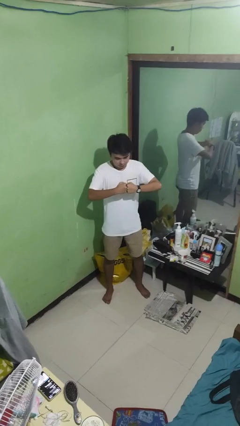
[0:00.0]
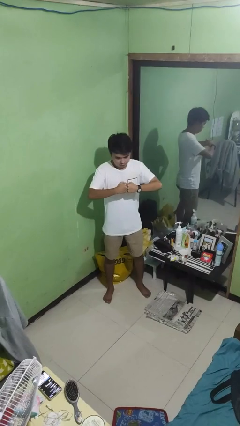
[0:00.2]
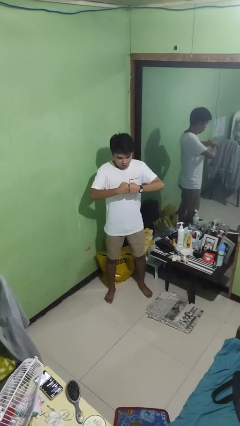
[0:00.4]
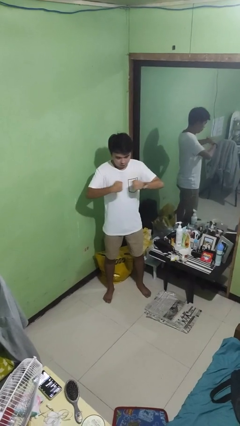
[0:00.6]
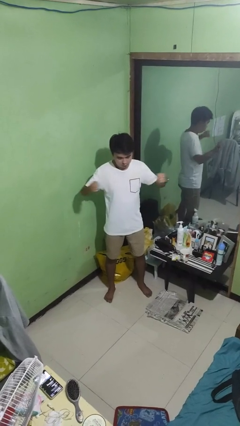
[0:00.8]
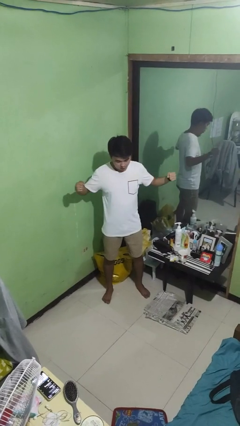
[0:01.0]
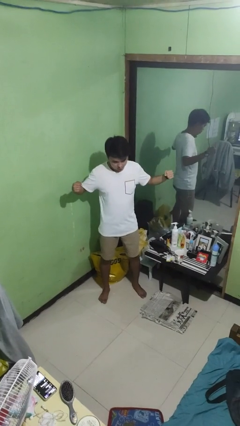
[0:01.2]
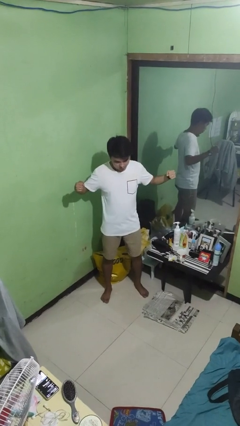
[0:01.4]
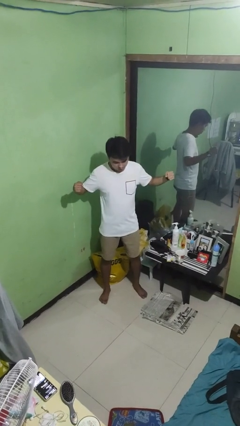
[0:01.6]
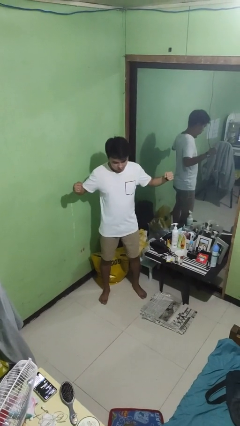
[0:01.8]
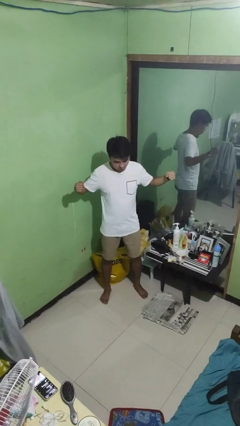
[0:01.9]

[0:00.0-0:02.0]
person gestures zoom in

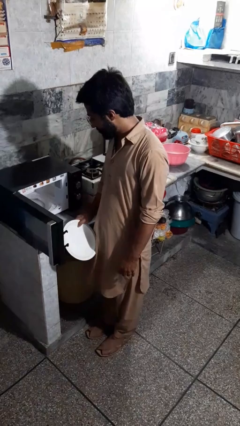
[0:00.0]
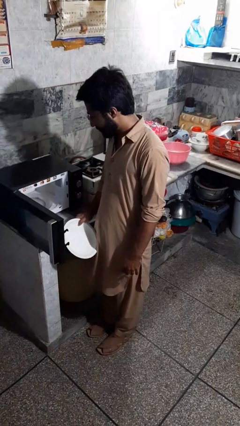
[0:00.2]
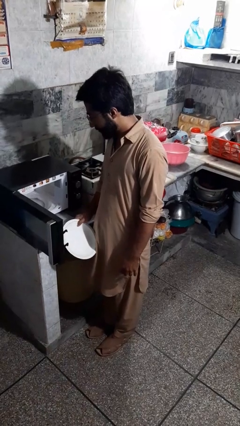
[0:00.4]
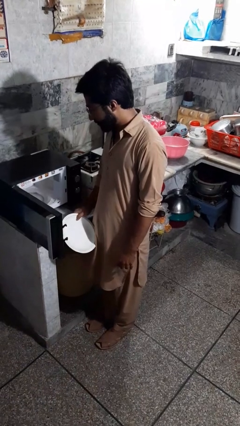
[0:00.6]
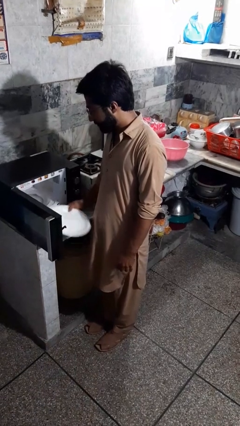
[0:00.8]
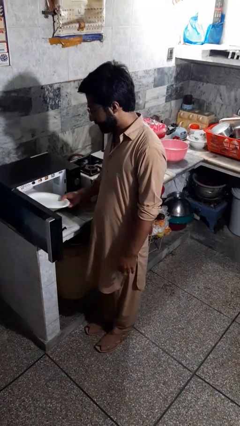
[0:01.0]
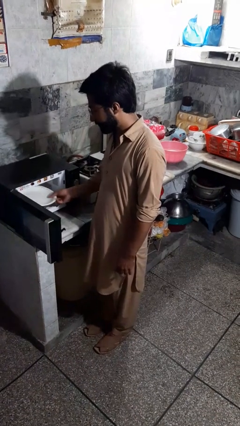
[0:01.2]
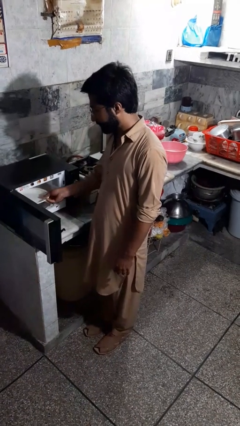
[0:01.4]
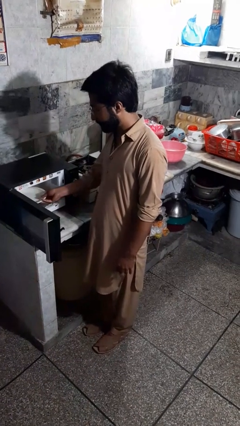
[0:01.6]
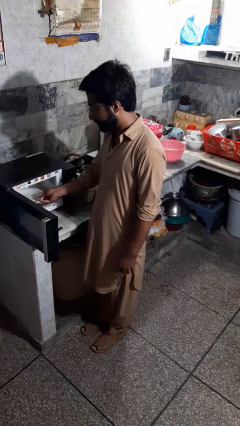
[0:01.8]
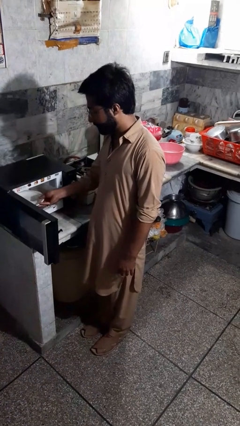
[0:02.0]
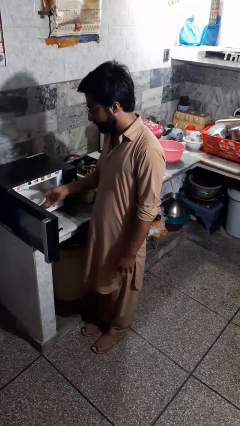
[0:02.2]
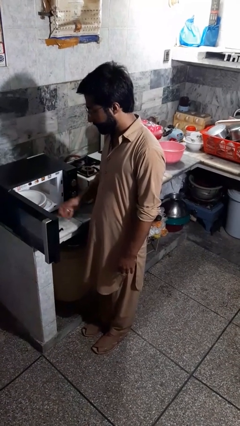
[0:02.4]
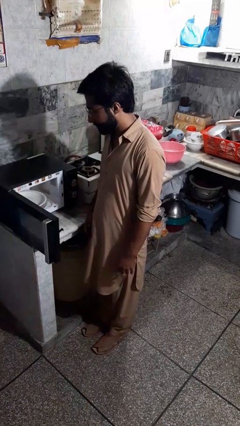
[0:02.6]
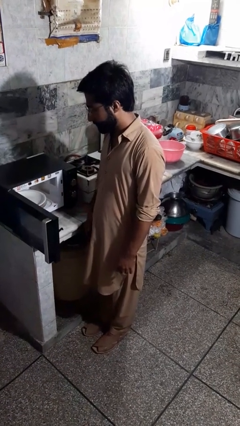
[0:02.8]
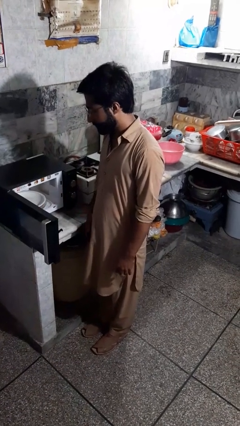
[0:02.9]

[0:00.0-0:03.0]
person puts object into oven

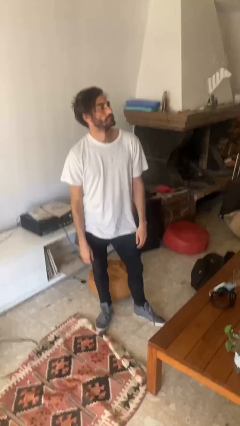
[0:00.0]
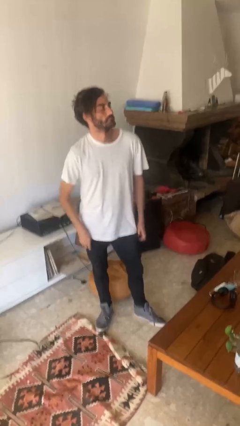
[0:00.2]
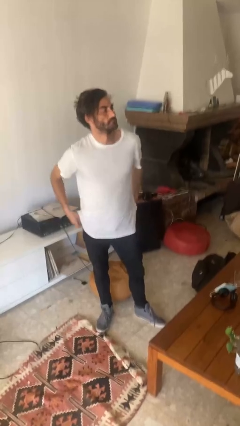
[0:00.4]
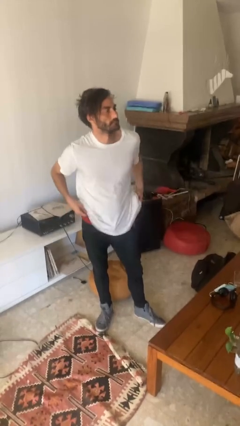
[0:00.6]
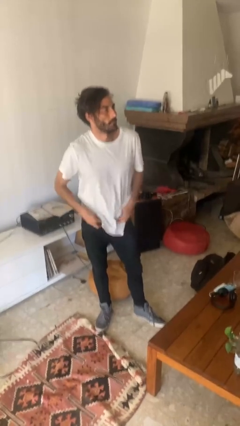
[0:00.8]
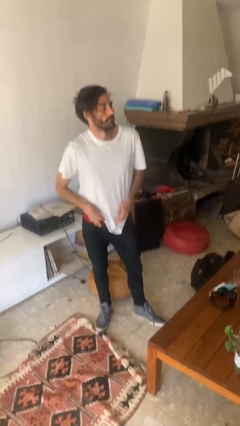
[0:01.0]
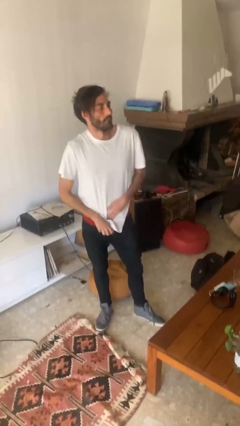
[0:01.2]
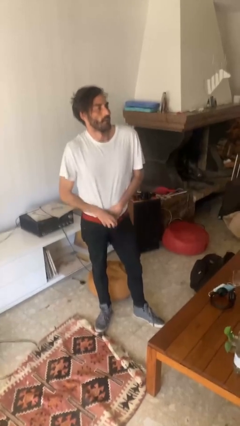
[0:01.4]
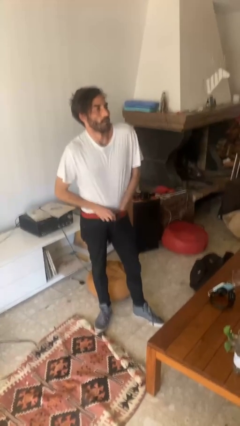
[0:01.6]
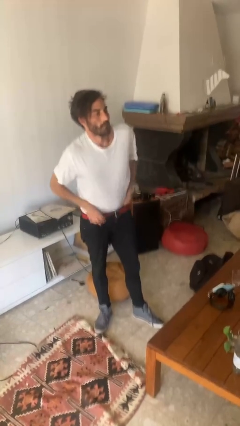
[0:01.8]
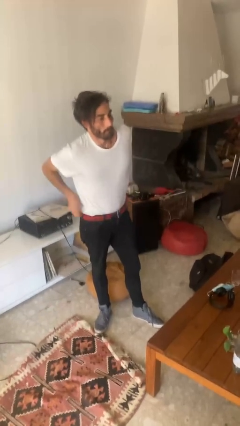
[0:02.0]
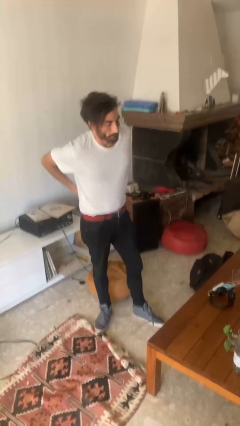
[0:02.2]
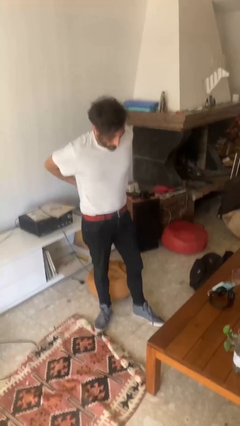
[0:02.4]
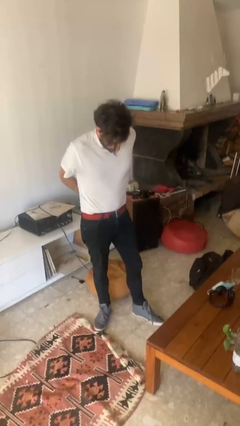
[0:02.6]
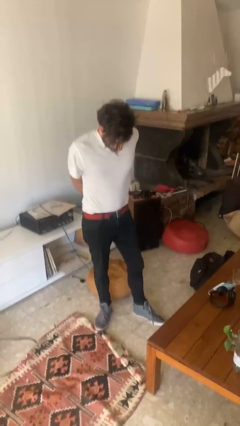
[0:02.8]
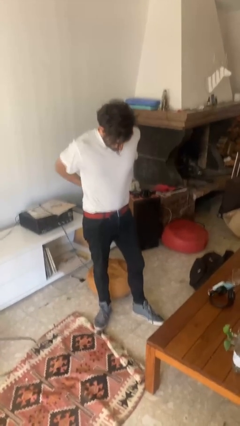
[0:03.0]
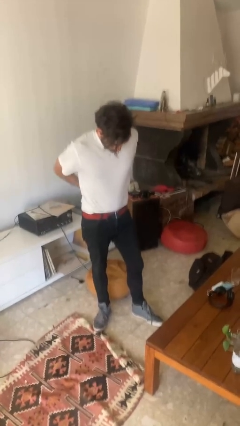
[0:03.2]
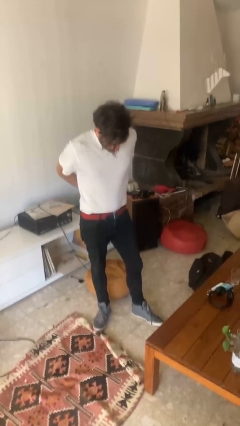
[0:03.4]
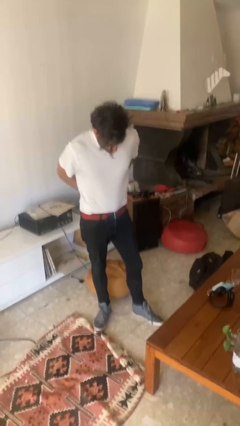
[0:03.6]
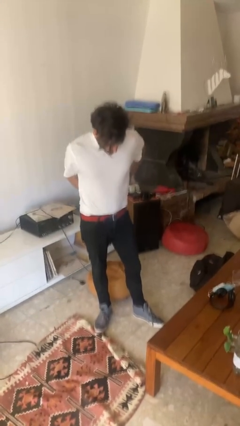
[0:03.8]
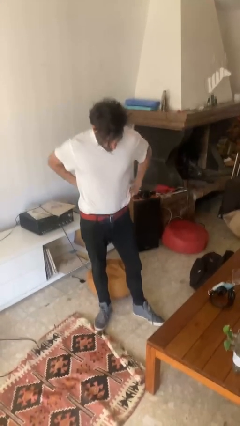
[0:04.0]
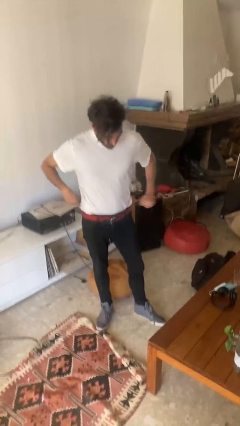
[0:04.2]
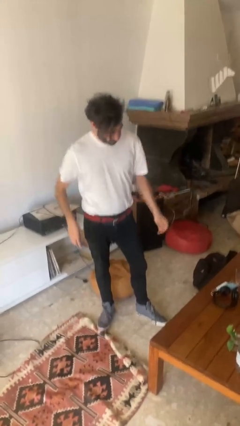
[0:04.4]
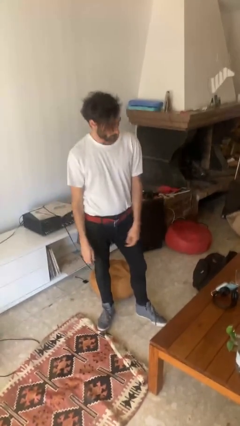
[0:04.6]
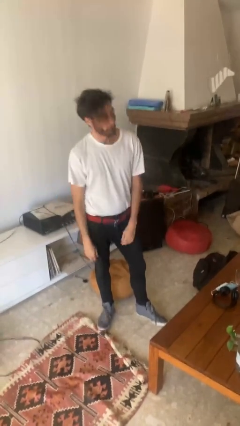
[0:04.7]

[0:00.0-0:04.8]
person tucks in shirt

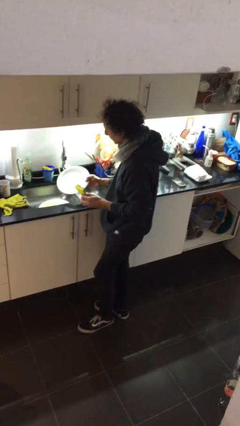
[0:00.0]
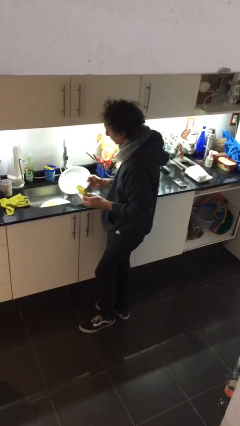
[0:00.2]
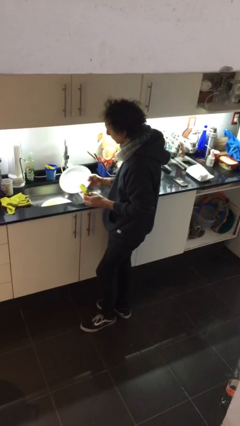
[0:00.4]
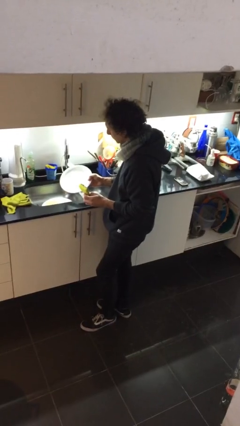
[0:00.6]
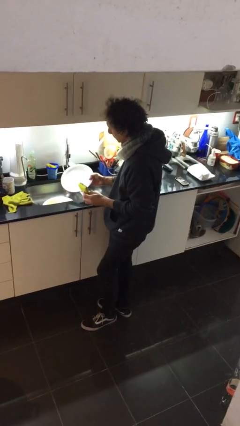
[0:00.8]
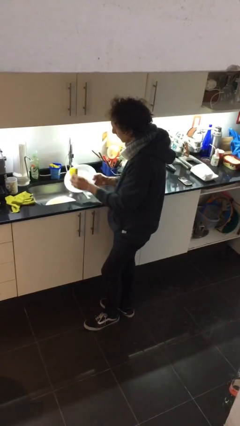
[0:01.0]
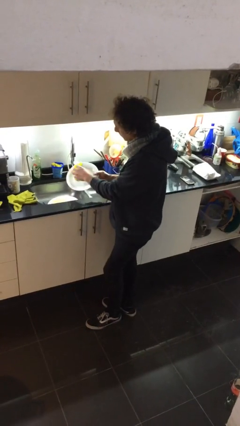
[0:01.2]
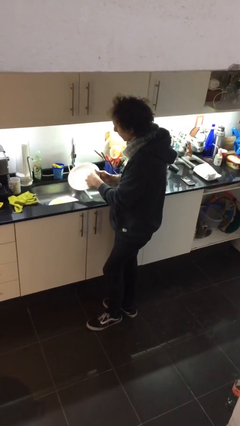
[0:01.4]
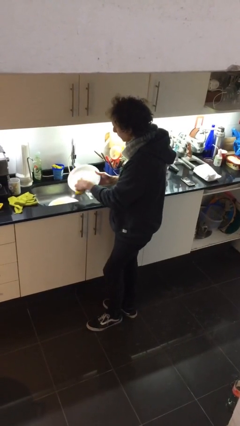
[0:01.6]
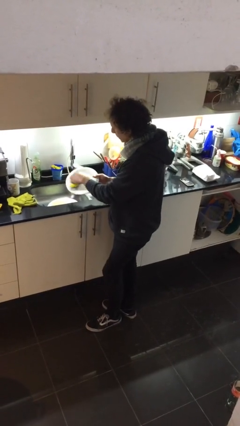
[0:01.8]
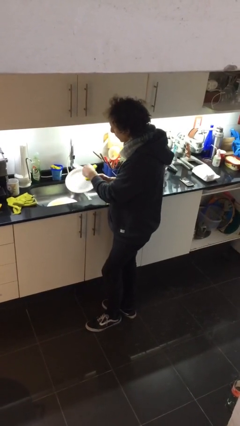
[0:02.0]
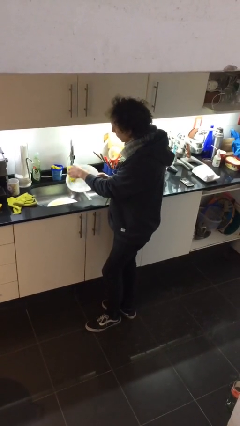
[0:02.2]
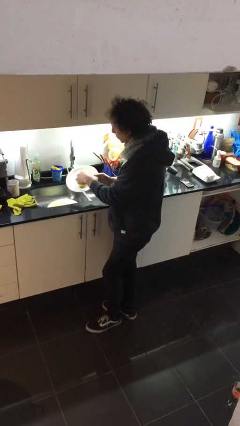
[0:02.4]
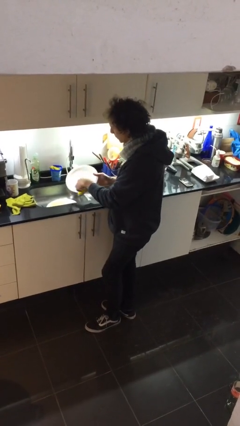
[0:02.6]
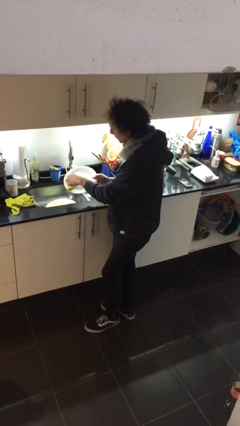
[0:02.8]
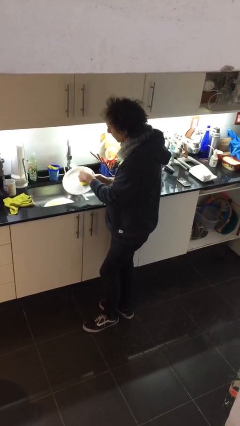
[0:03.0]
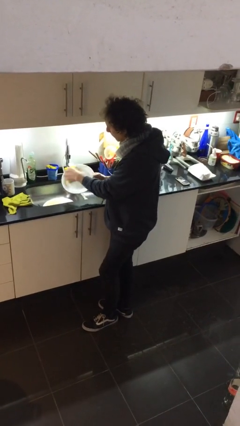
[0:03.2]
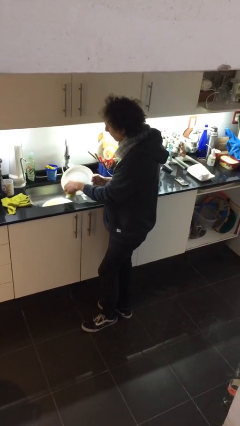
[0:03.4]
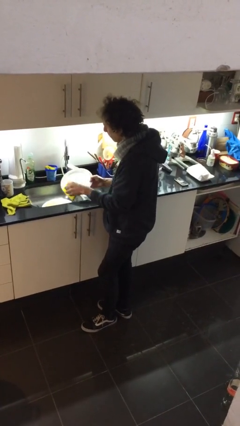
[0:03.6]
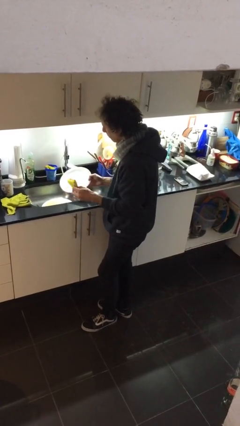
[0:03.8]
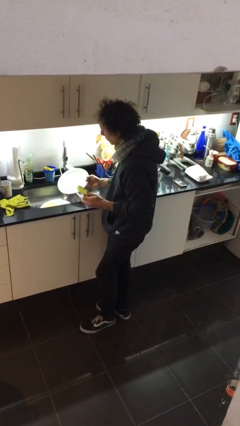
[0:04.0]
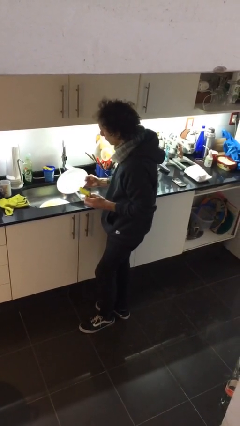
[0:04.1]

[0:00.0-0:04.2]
person washes dish

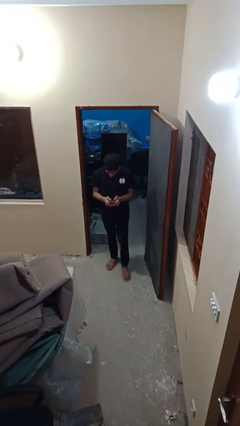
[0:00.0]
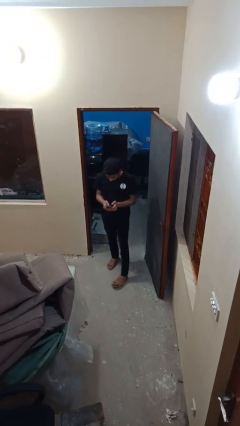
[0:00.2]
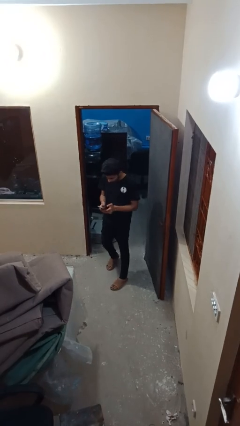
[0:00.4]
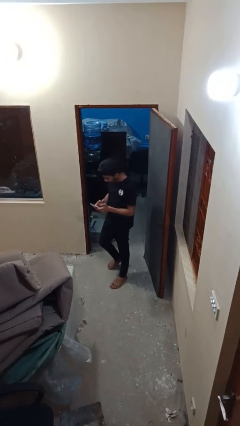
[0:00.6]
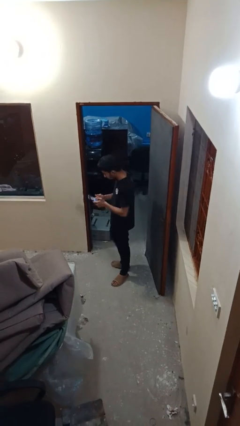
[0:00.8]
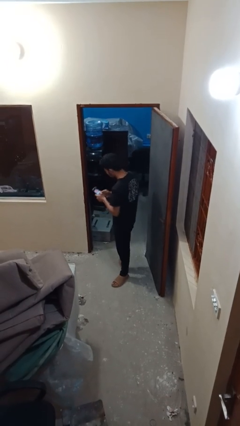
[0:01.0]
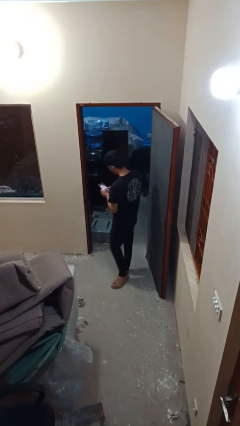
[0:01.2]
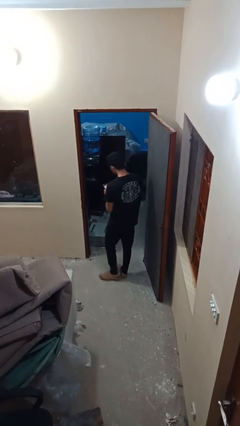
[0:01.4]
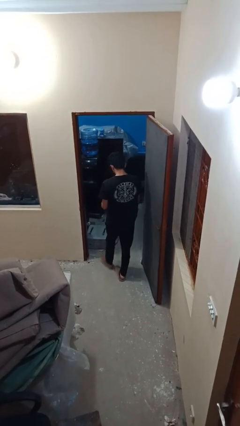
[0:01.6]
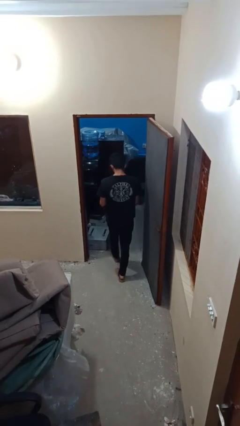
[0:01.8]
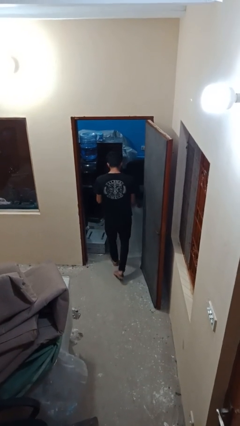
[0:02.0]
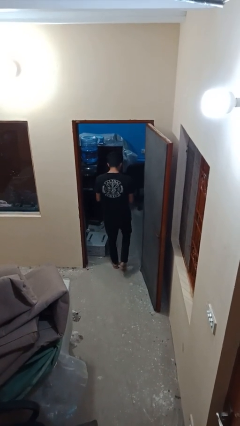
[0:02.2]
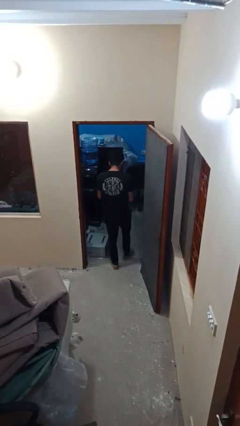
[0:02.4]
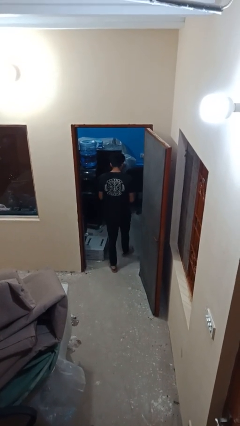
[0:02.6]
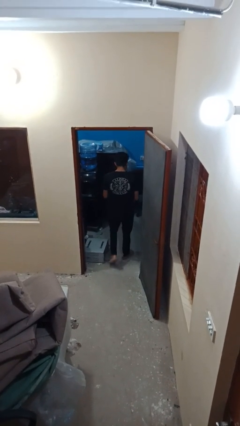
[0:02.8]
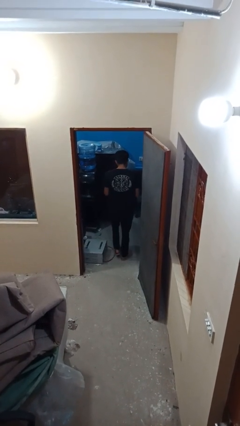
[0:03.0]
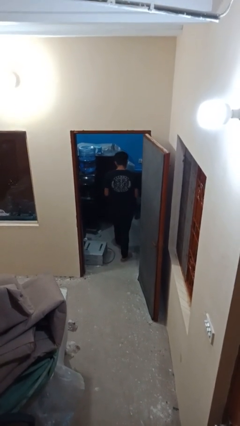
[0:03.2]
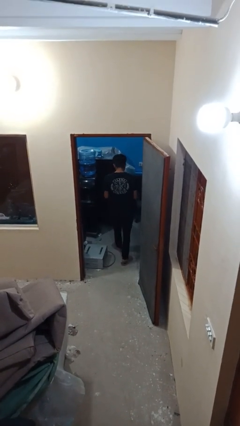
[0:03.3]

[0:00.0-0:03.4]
person exits scene through structure

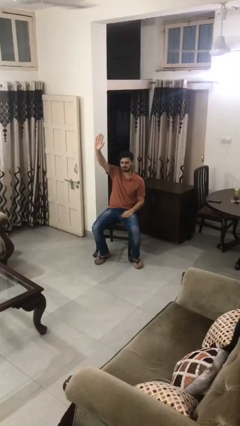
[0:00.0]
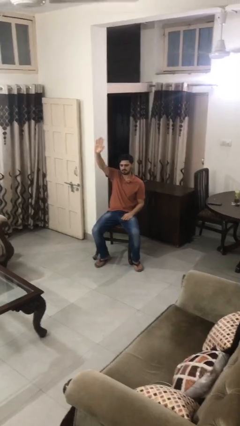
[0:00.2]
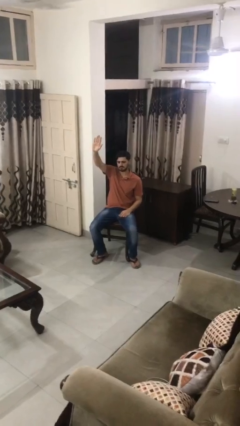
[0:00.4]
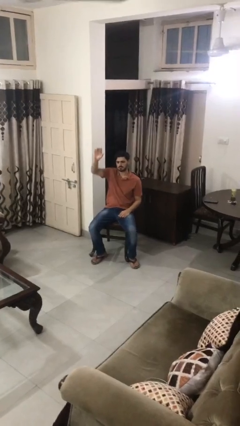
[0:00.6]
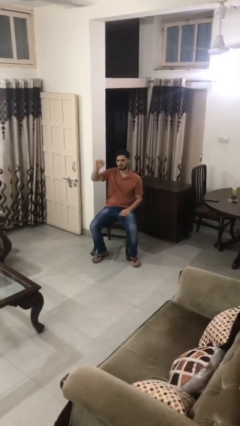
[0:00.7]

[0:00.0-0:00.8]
person gestures lower hand
